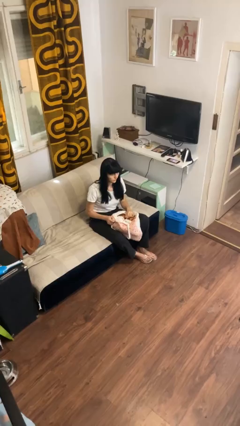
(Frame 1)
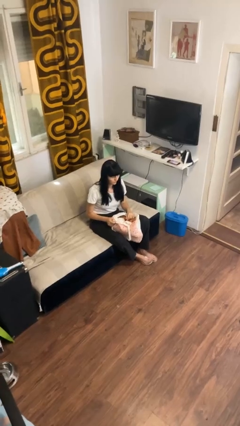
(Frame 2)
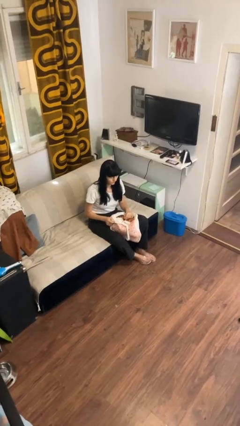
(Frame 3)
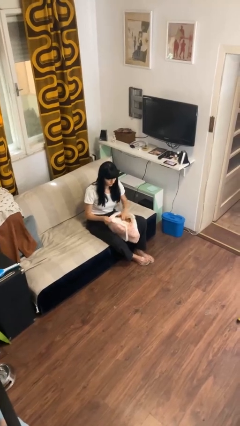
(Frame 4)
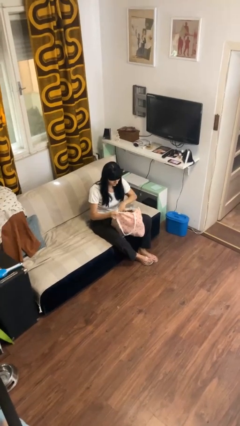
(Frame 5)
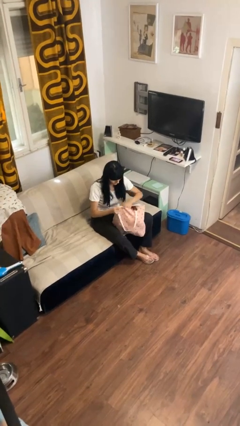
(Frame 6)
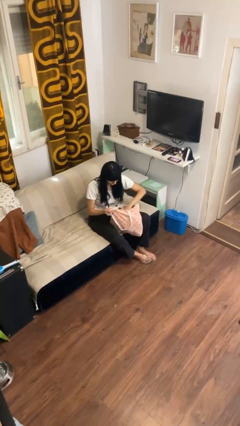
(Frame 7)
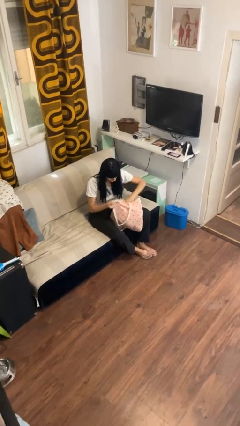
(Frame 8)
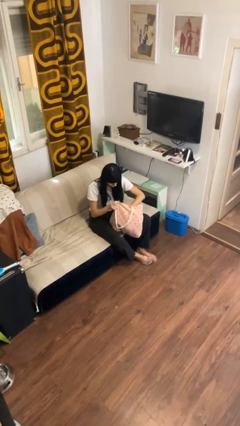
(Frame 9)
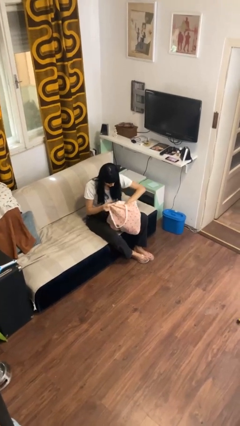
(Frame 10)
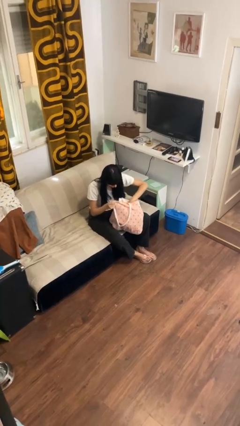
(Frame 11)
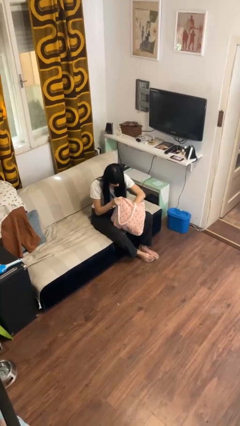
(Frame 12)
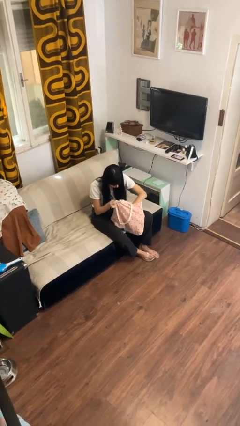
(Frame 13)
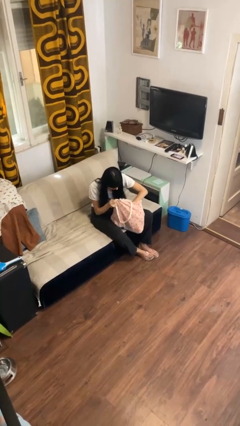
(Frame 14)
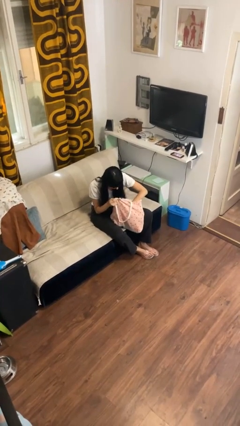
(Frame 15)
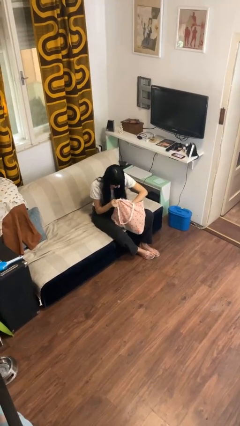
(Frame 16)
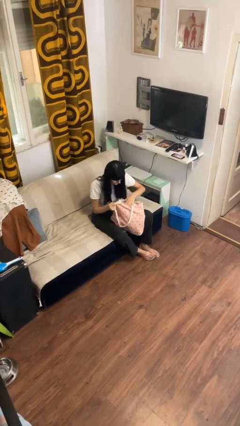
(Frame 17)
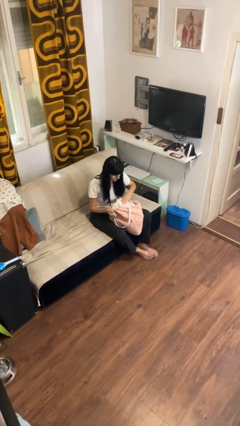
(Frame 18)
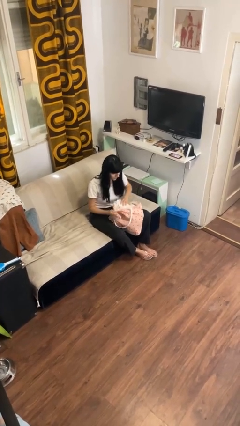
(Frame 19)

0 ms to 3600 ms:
person searches in bag

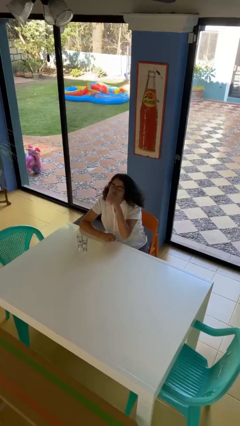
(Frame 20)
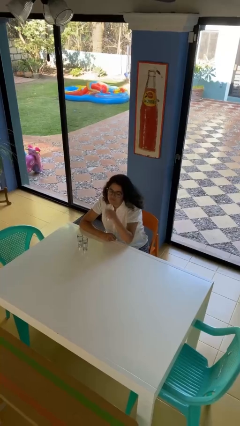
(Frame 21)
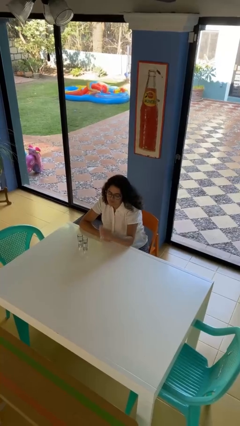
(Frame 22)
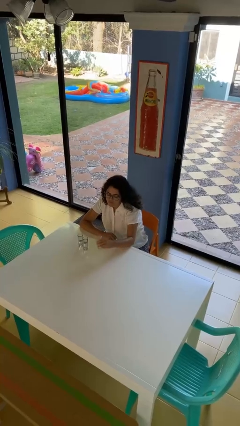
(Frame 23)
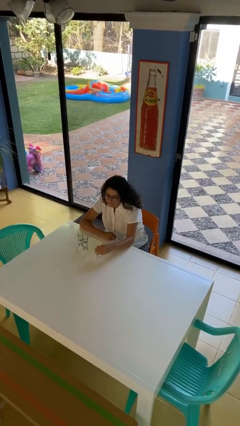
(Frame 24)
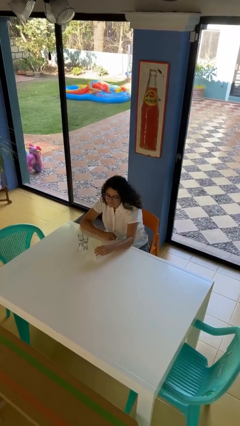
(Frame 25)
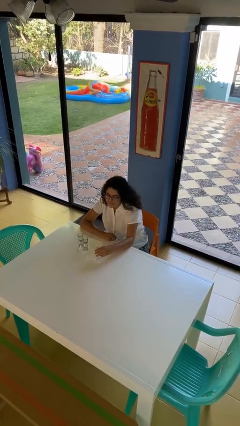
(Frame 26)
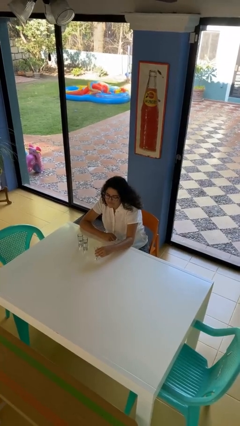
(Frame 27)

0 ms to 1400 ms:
person puts down object on table

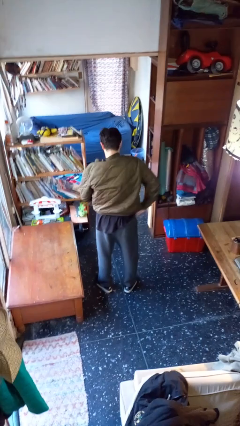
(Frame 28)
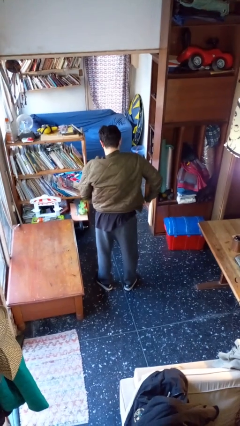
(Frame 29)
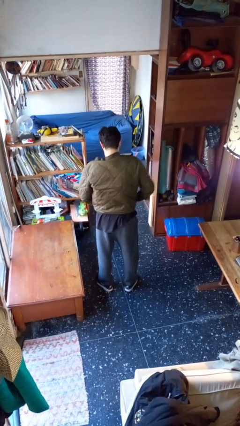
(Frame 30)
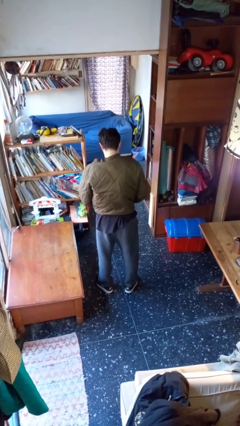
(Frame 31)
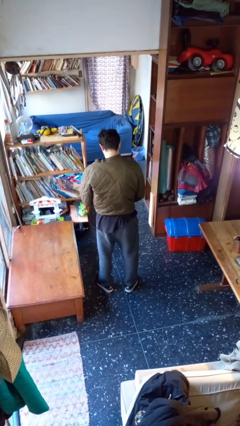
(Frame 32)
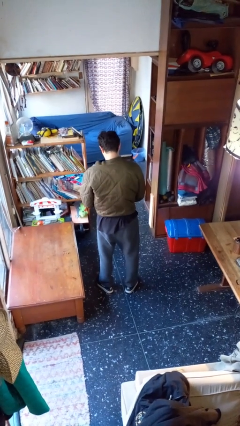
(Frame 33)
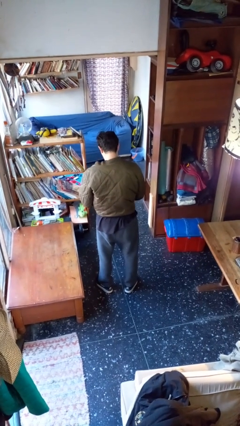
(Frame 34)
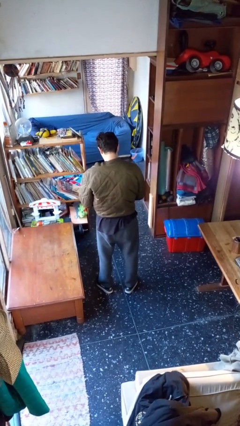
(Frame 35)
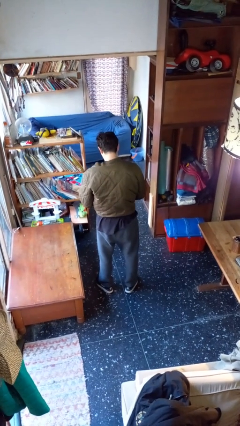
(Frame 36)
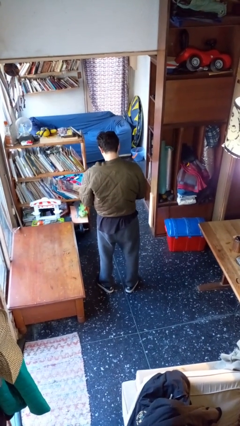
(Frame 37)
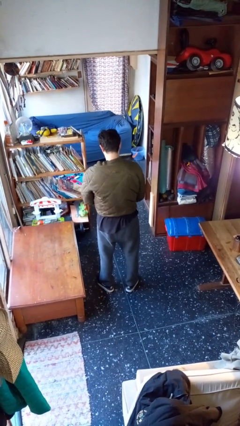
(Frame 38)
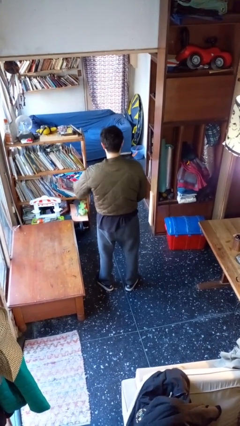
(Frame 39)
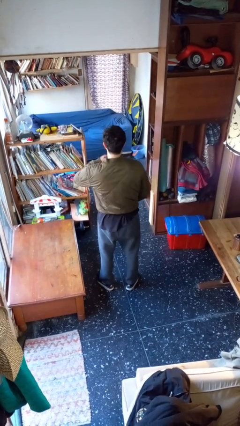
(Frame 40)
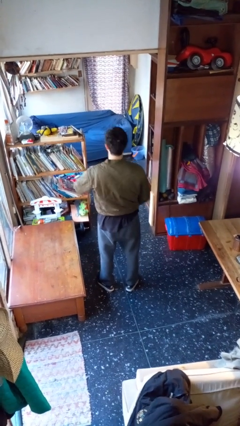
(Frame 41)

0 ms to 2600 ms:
person zips up jacket

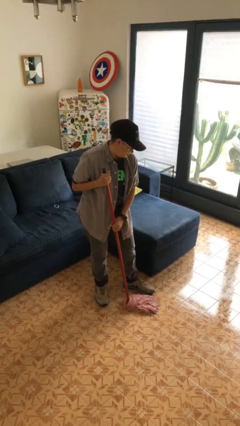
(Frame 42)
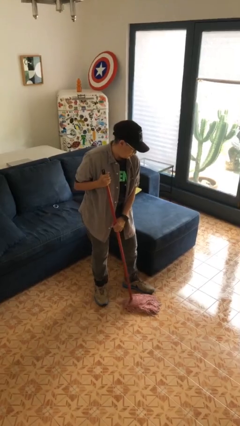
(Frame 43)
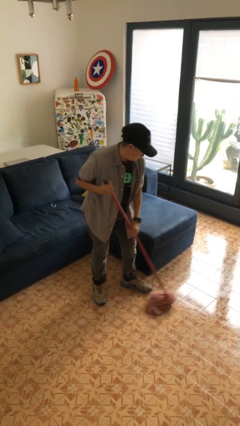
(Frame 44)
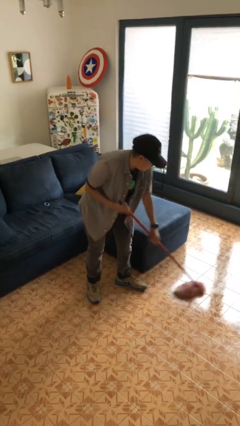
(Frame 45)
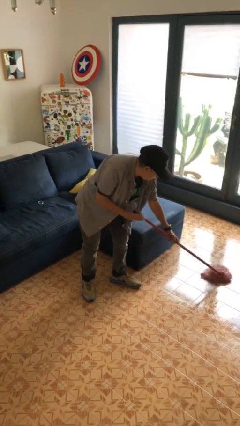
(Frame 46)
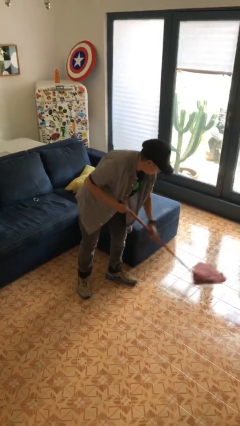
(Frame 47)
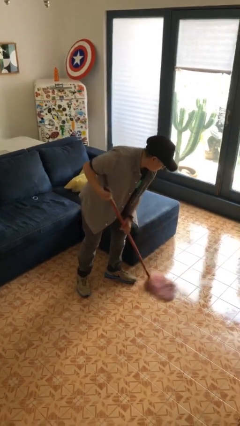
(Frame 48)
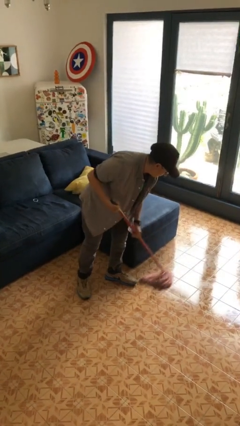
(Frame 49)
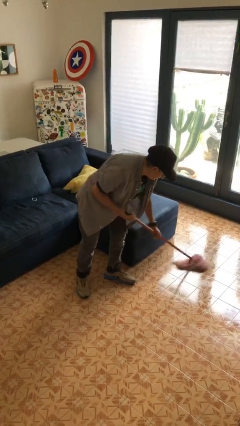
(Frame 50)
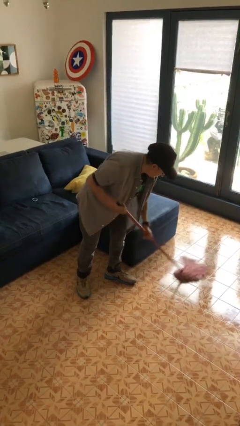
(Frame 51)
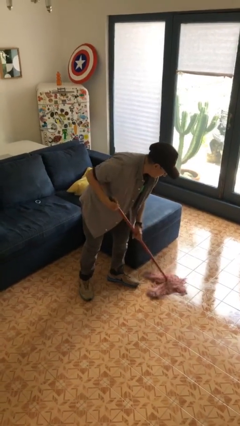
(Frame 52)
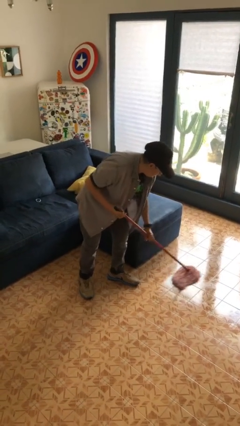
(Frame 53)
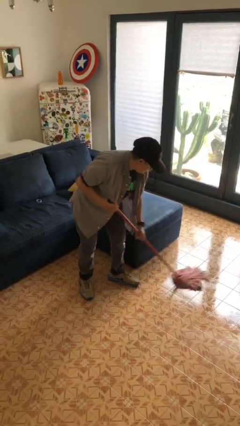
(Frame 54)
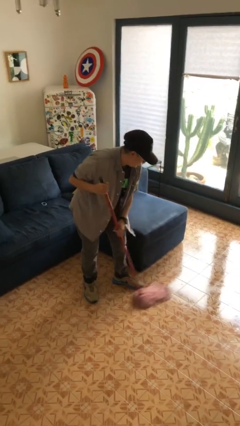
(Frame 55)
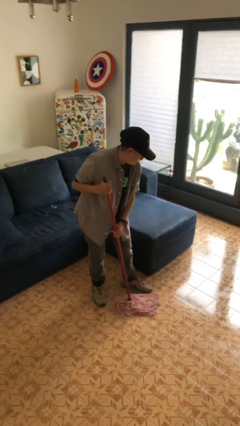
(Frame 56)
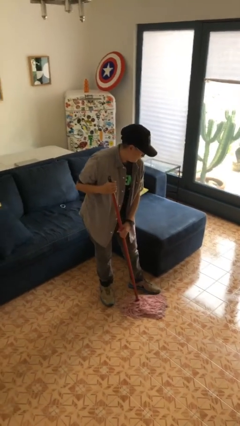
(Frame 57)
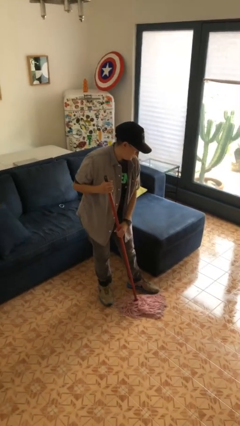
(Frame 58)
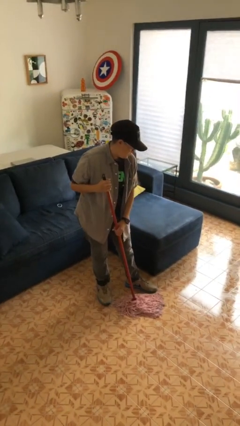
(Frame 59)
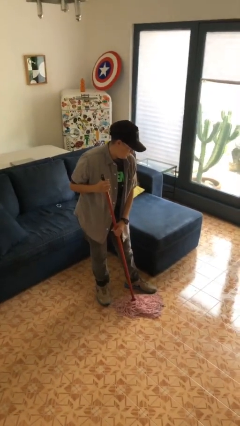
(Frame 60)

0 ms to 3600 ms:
person mops

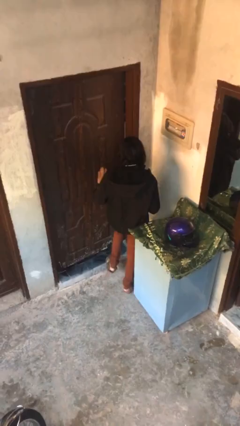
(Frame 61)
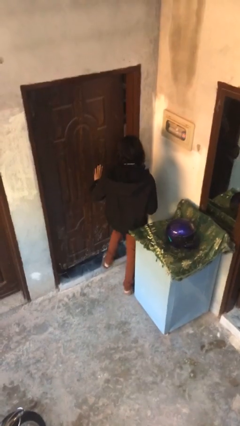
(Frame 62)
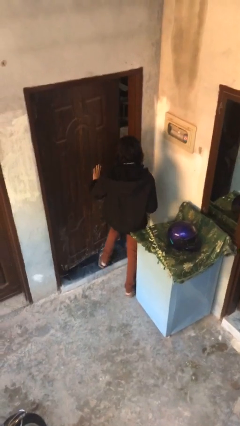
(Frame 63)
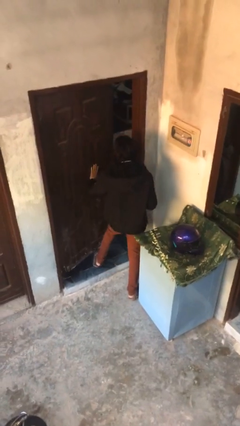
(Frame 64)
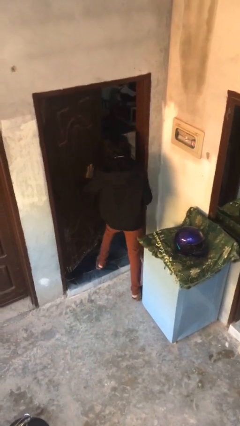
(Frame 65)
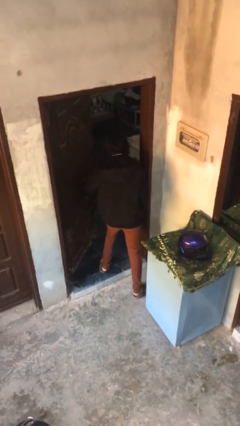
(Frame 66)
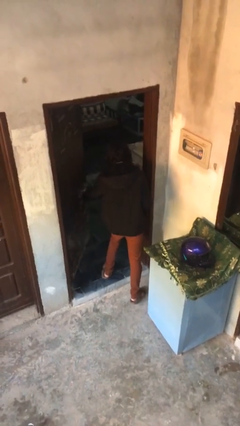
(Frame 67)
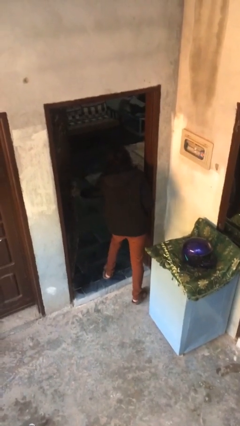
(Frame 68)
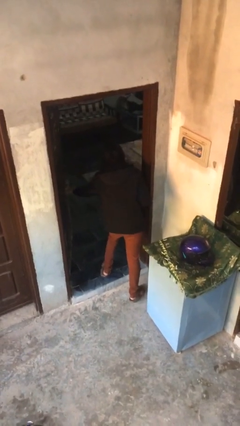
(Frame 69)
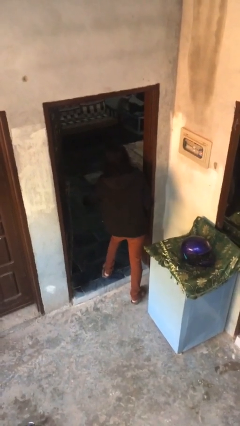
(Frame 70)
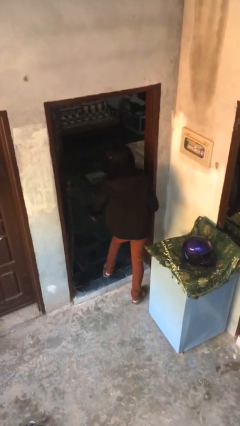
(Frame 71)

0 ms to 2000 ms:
person opens facility door

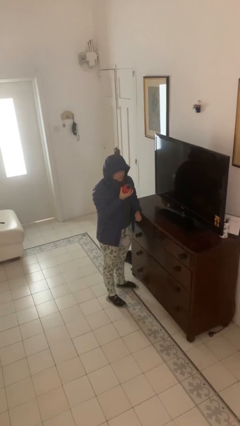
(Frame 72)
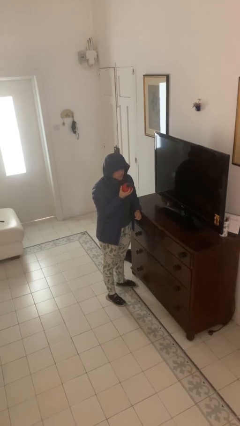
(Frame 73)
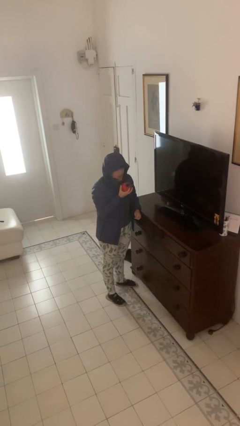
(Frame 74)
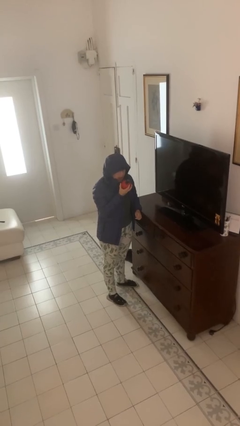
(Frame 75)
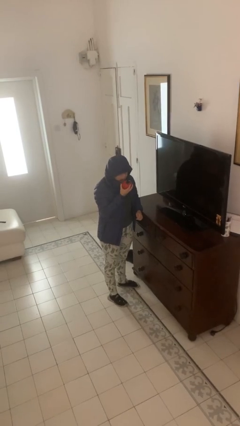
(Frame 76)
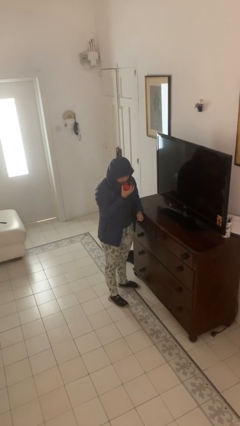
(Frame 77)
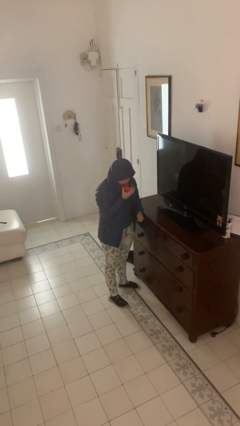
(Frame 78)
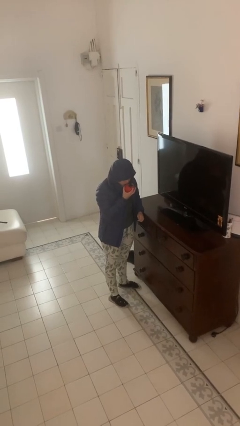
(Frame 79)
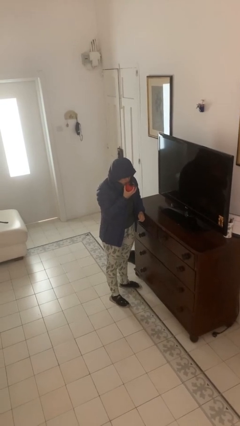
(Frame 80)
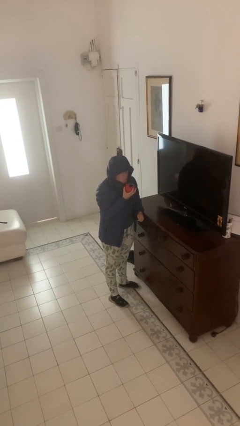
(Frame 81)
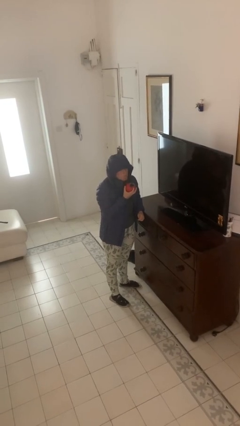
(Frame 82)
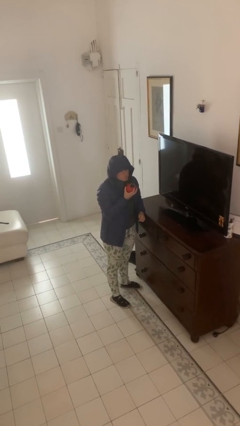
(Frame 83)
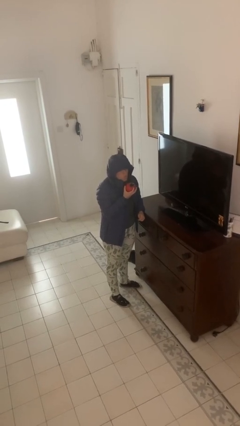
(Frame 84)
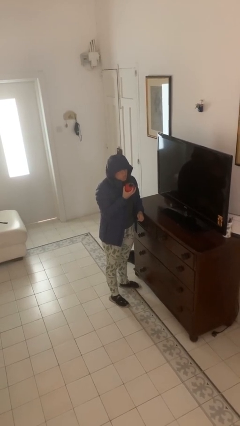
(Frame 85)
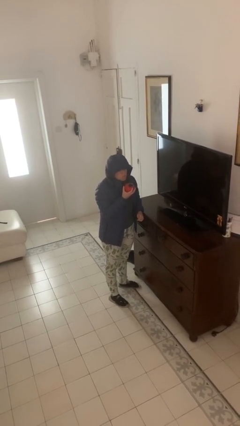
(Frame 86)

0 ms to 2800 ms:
person eats apple

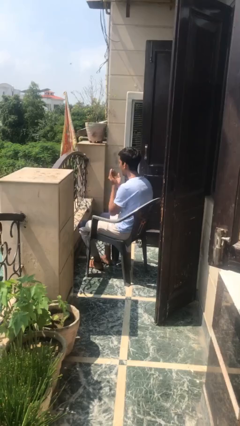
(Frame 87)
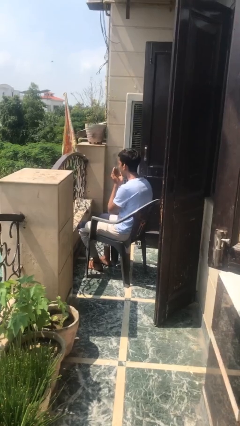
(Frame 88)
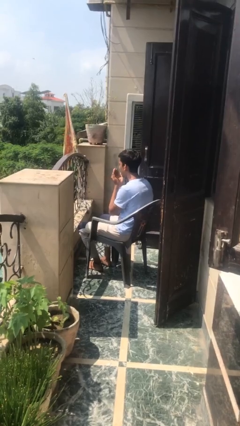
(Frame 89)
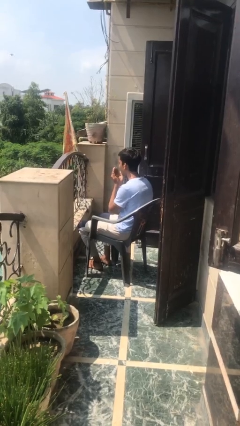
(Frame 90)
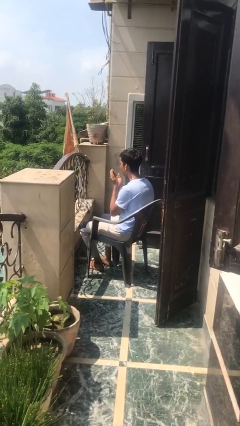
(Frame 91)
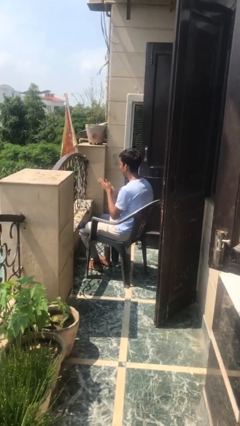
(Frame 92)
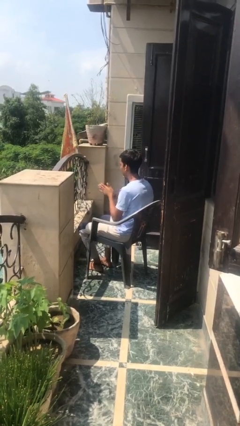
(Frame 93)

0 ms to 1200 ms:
person blows into hands
